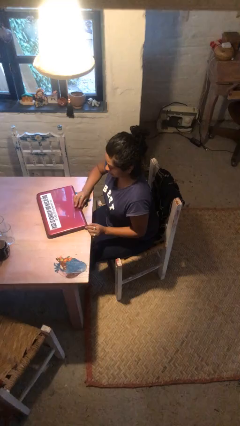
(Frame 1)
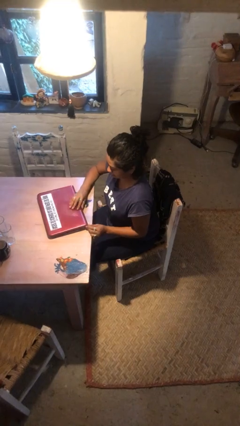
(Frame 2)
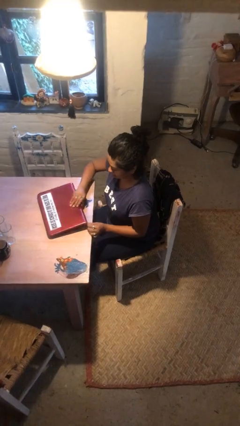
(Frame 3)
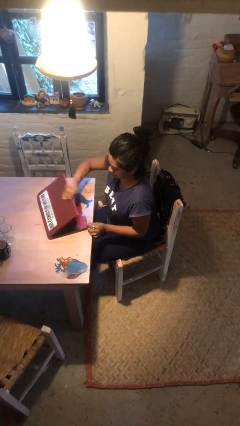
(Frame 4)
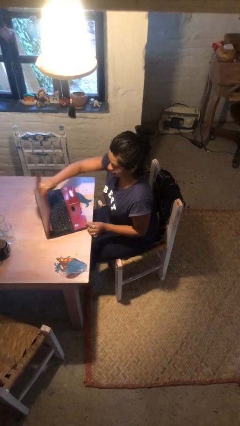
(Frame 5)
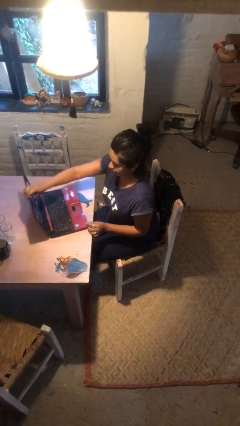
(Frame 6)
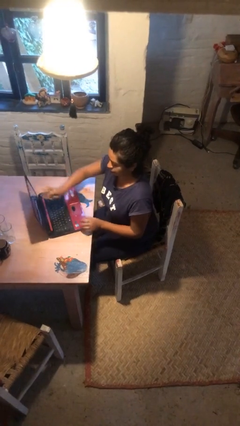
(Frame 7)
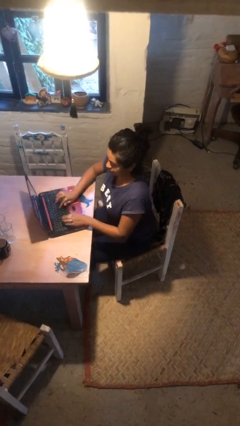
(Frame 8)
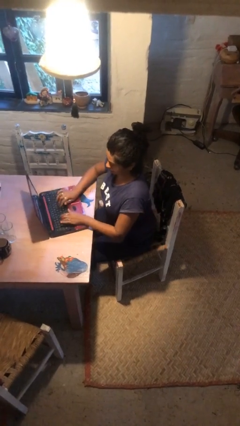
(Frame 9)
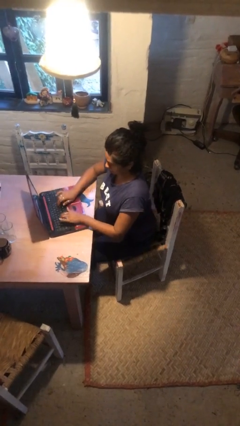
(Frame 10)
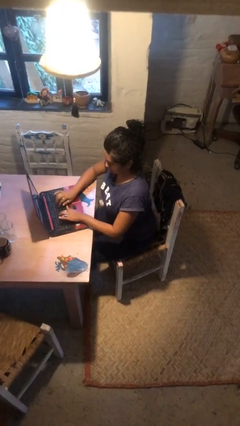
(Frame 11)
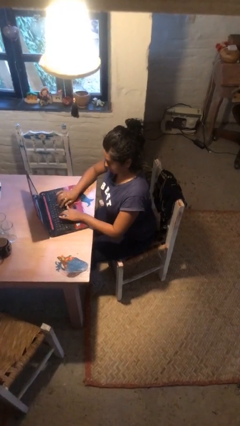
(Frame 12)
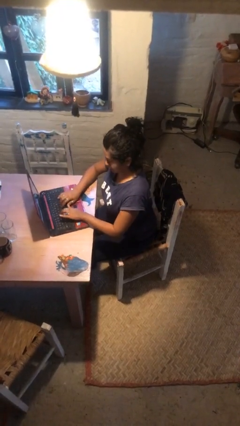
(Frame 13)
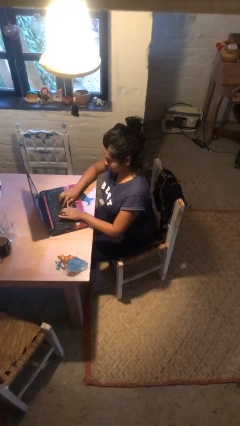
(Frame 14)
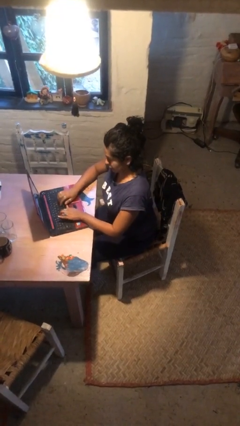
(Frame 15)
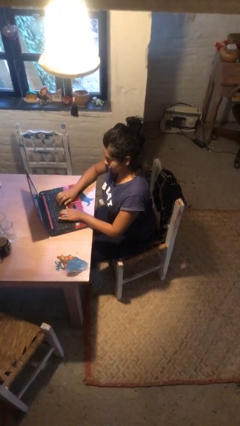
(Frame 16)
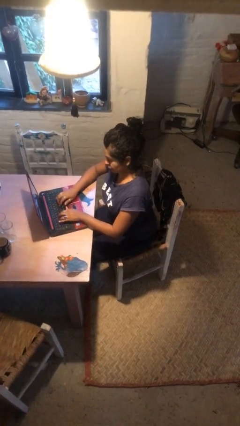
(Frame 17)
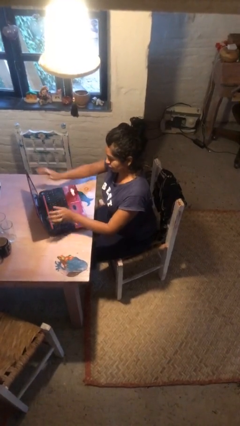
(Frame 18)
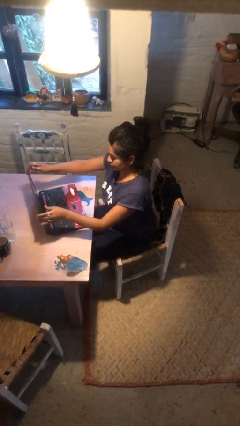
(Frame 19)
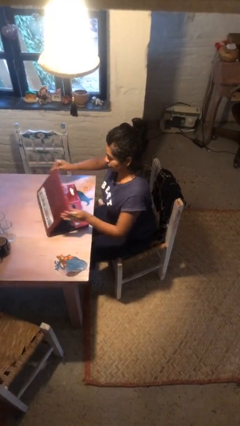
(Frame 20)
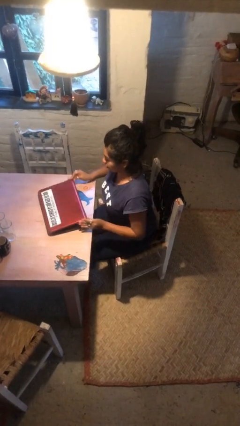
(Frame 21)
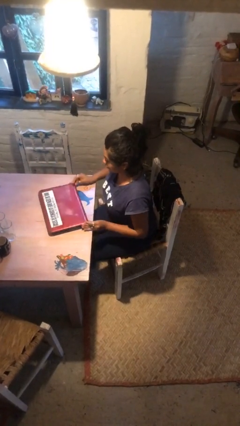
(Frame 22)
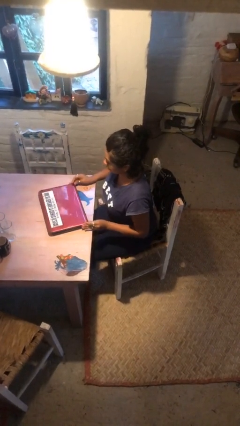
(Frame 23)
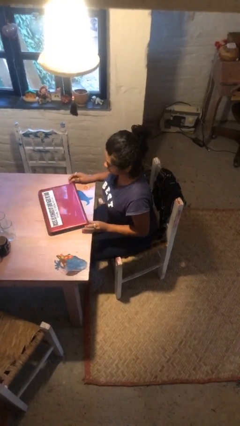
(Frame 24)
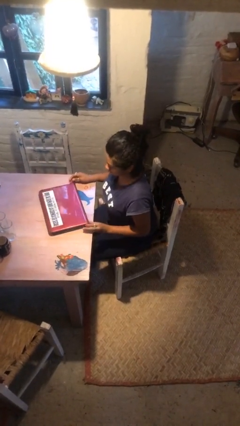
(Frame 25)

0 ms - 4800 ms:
person interacts with laptop

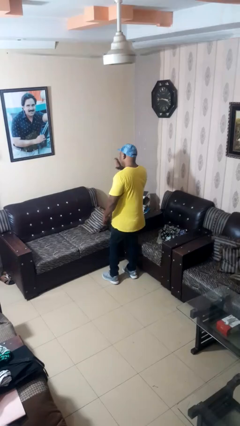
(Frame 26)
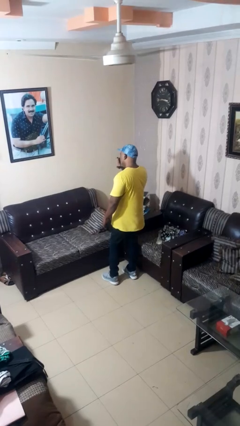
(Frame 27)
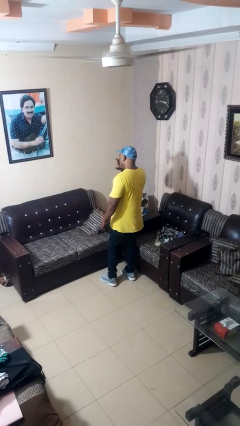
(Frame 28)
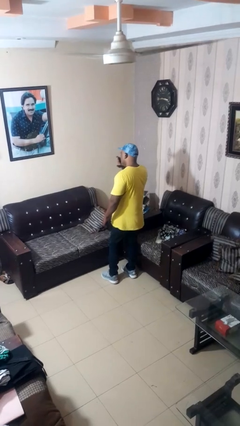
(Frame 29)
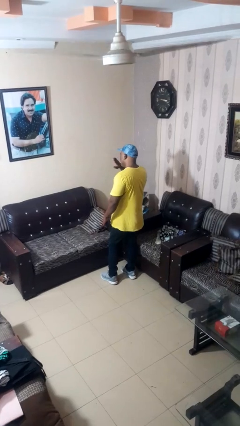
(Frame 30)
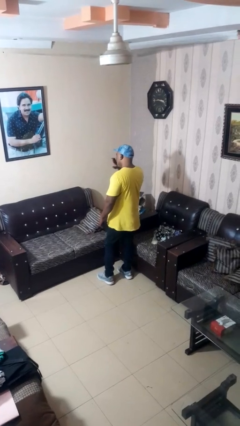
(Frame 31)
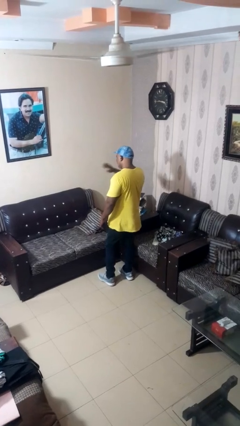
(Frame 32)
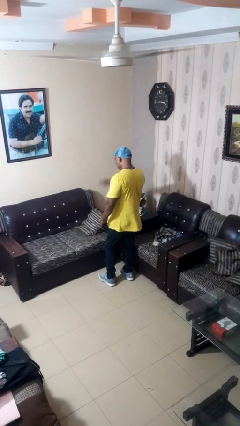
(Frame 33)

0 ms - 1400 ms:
person yawns

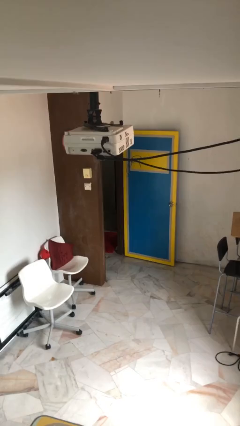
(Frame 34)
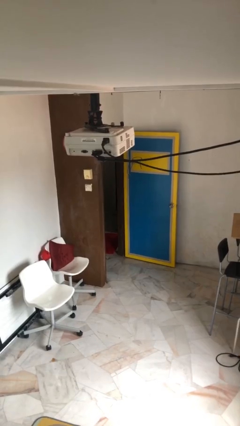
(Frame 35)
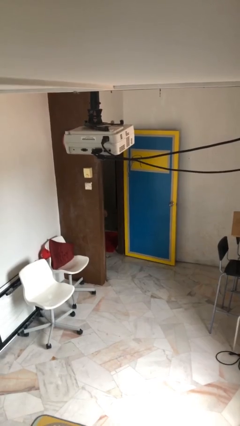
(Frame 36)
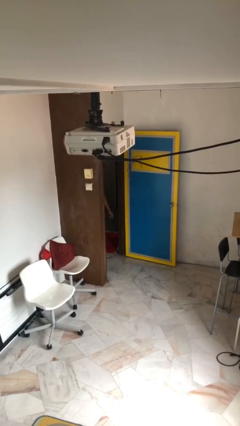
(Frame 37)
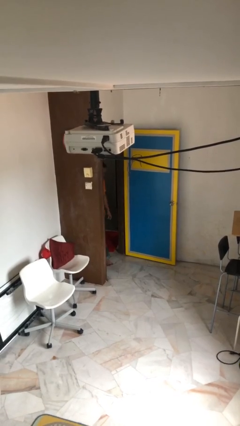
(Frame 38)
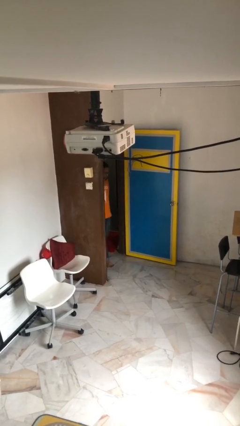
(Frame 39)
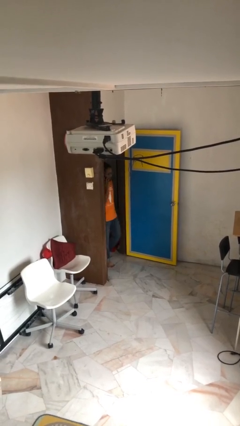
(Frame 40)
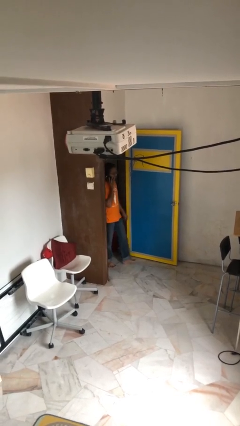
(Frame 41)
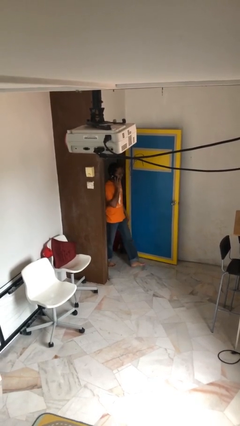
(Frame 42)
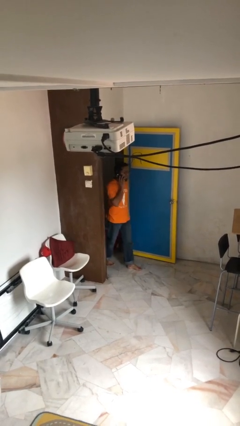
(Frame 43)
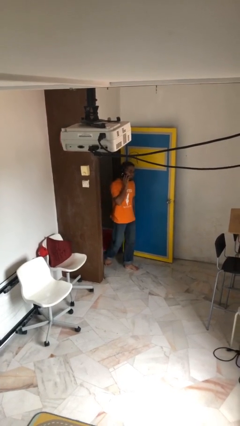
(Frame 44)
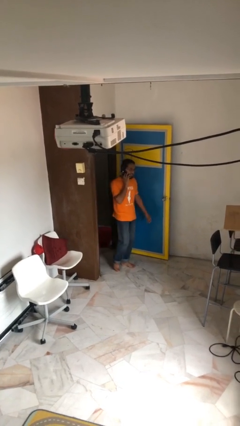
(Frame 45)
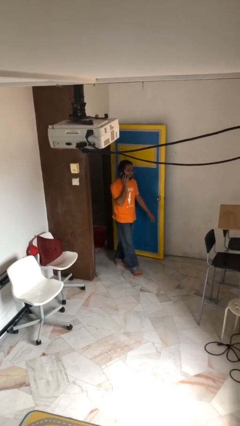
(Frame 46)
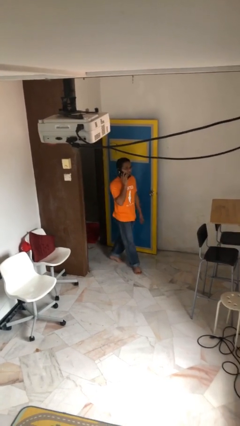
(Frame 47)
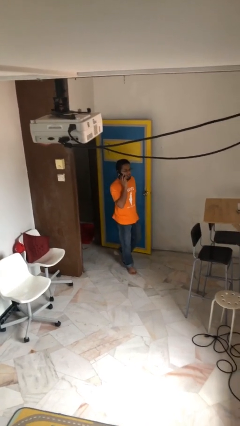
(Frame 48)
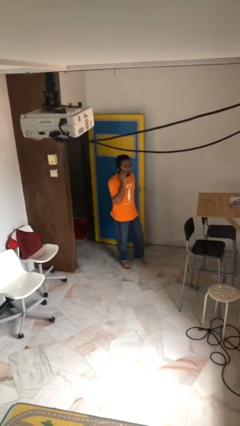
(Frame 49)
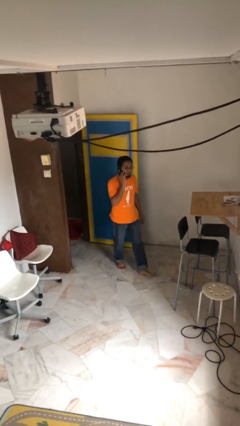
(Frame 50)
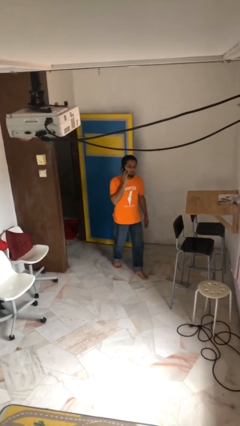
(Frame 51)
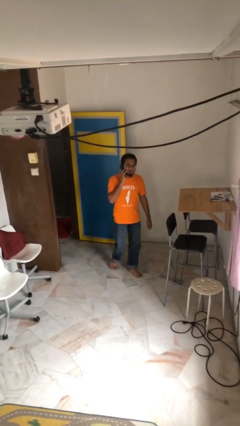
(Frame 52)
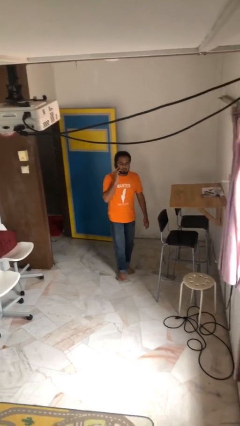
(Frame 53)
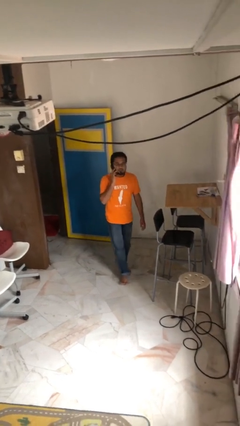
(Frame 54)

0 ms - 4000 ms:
person enters scene through structure

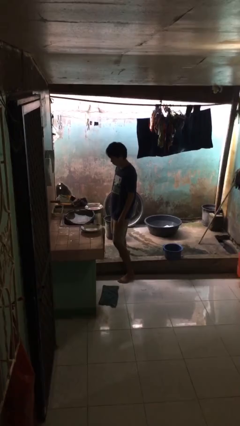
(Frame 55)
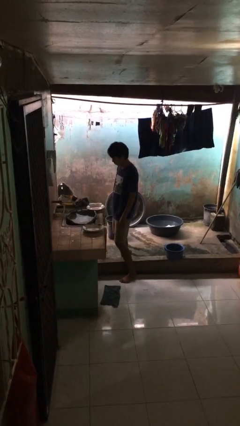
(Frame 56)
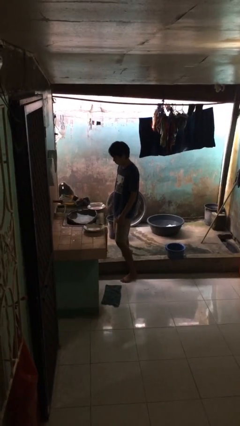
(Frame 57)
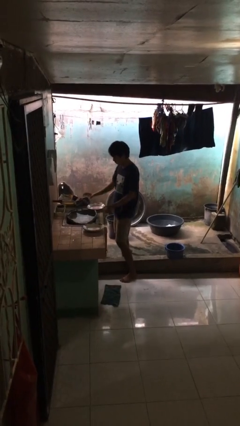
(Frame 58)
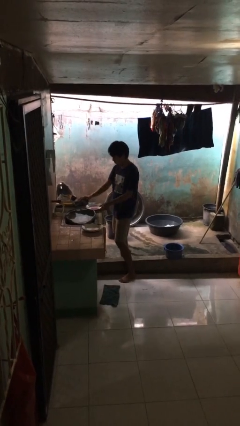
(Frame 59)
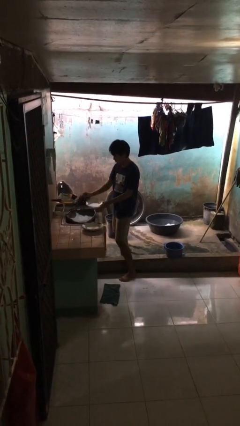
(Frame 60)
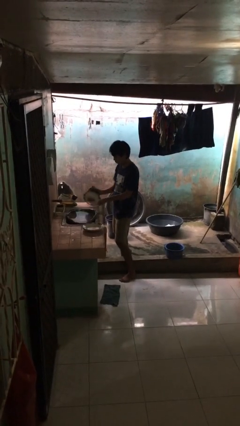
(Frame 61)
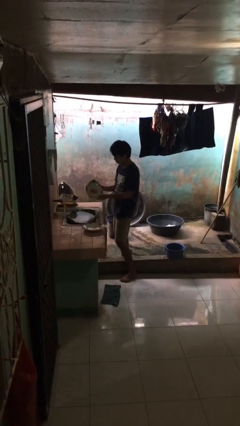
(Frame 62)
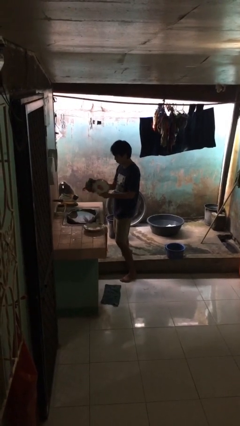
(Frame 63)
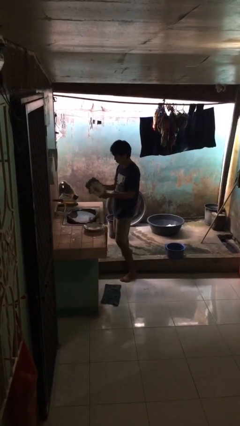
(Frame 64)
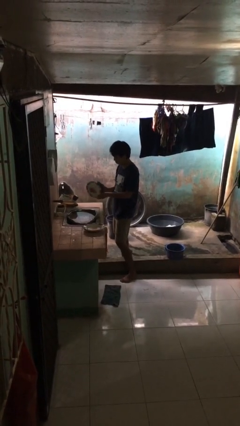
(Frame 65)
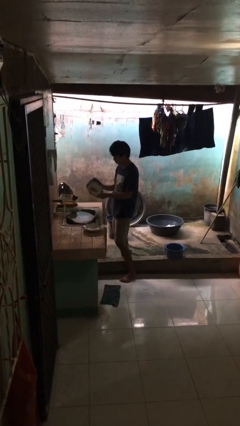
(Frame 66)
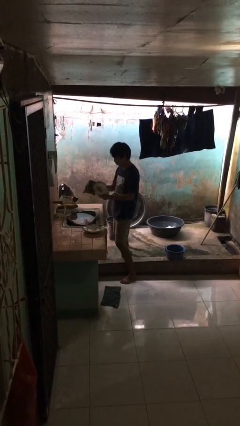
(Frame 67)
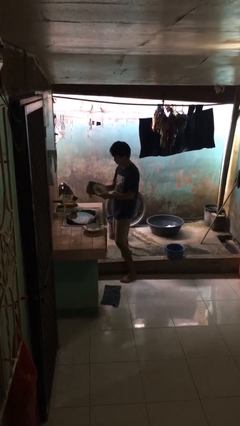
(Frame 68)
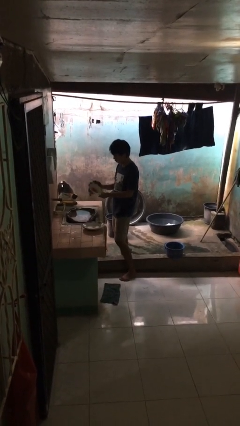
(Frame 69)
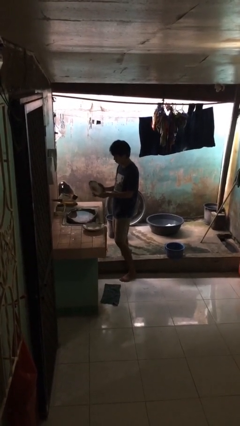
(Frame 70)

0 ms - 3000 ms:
person dries dish

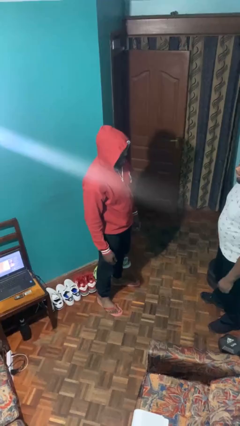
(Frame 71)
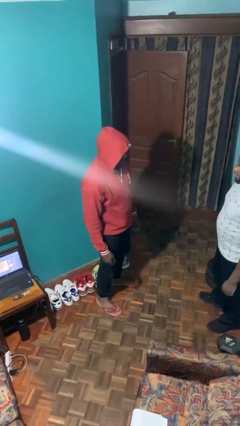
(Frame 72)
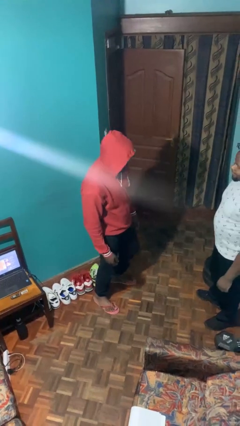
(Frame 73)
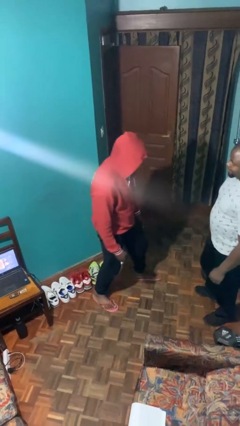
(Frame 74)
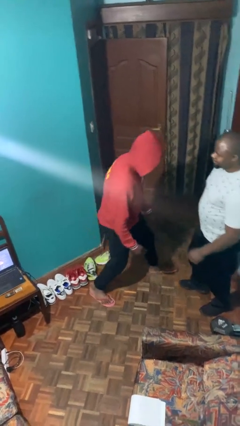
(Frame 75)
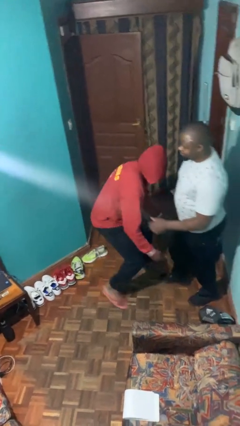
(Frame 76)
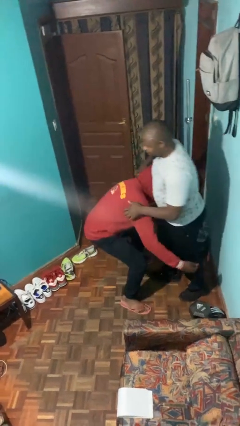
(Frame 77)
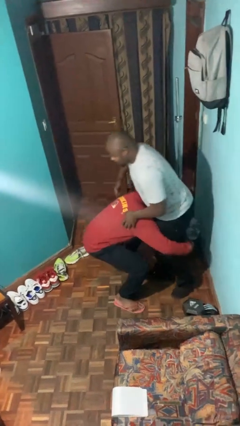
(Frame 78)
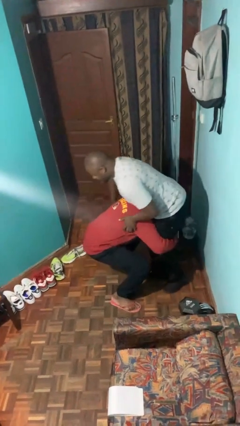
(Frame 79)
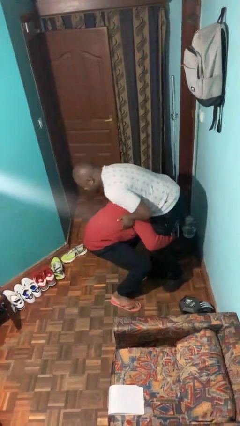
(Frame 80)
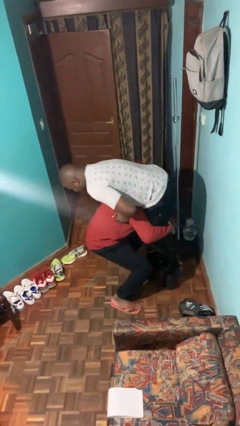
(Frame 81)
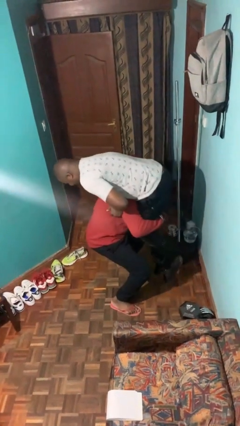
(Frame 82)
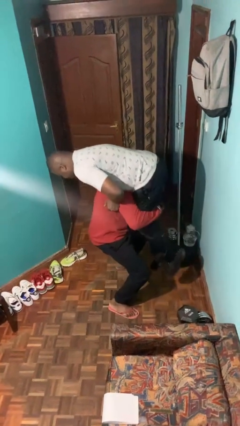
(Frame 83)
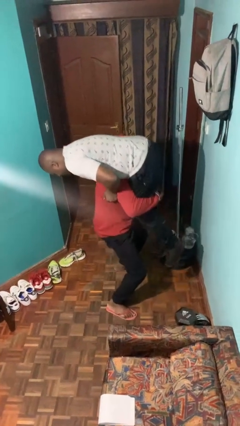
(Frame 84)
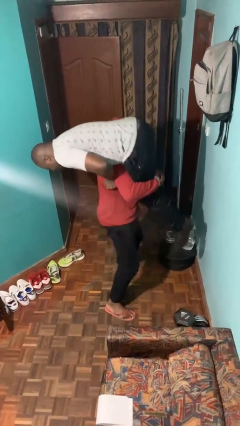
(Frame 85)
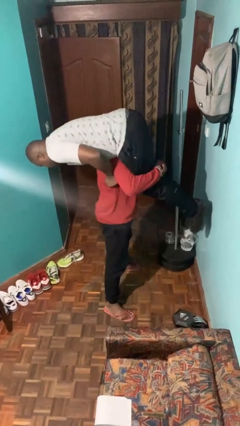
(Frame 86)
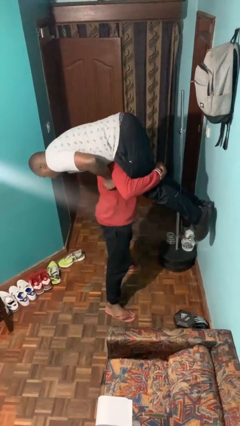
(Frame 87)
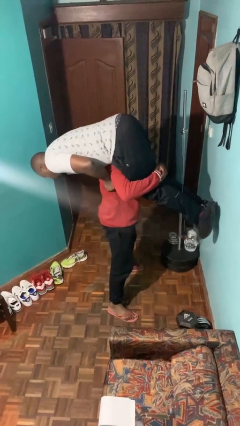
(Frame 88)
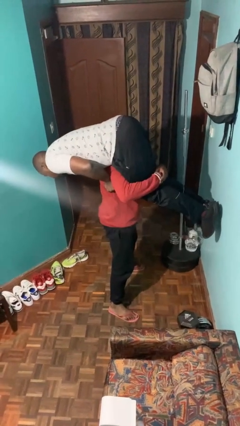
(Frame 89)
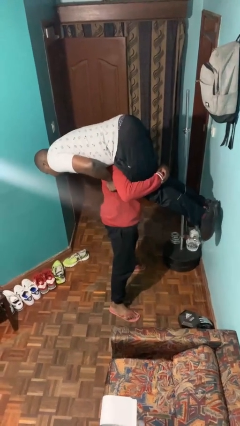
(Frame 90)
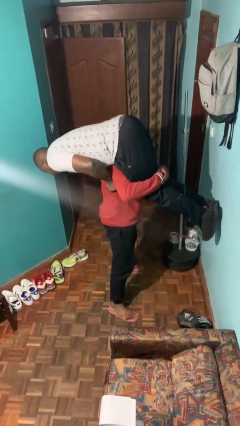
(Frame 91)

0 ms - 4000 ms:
person carries person over shoulder

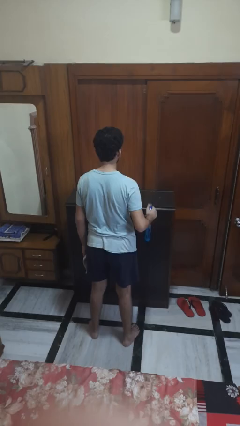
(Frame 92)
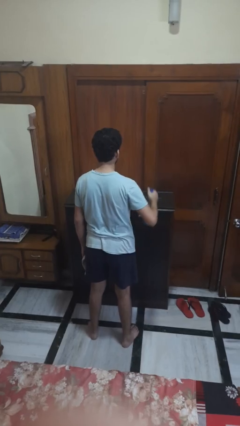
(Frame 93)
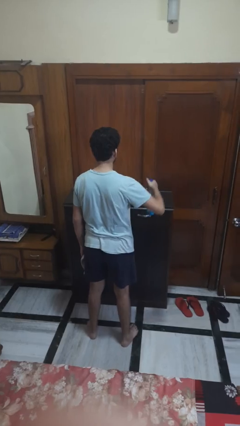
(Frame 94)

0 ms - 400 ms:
person sprays from bottle
